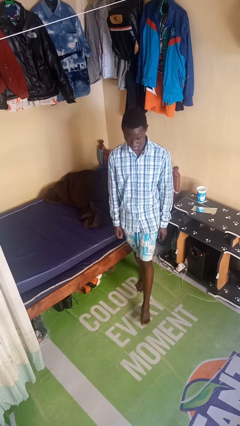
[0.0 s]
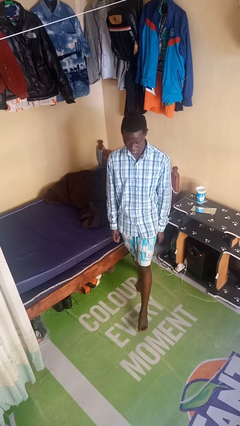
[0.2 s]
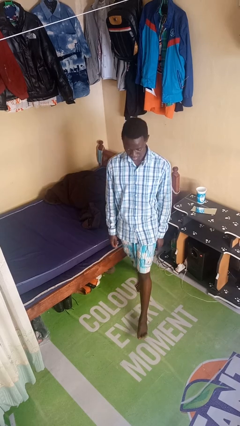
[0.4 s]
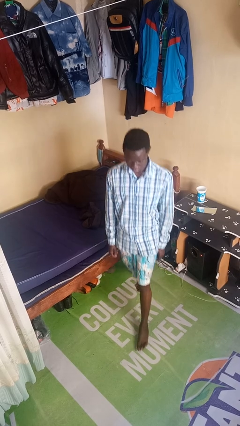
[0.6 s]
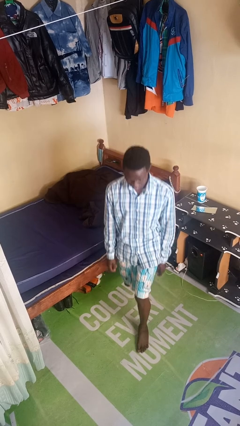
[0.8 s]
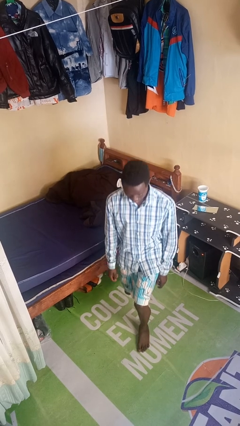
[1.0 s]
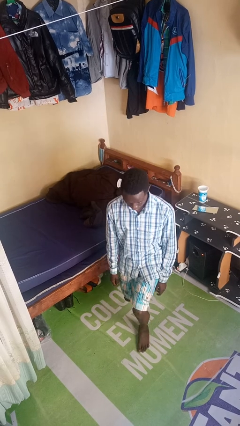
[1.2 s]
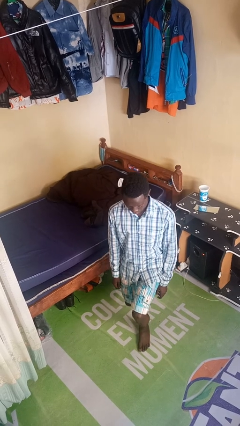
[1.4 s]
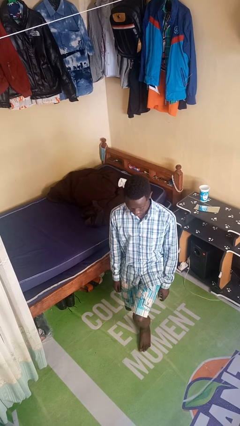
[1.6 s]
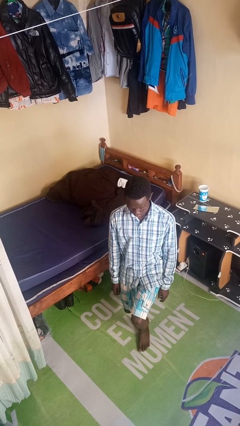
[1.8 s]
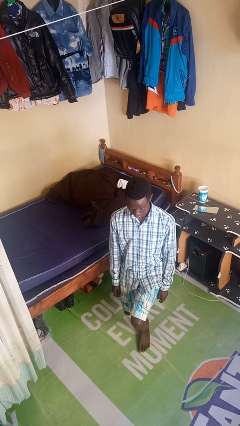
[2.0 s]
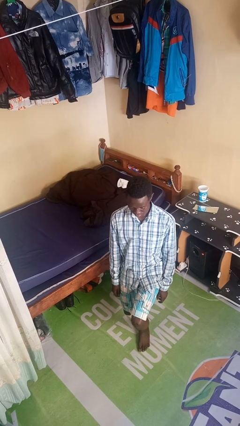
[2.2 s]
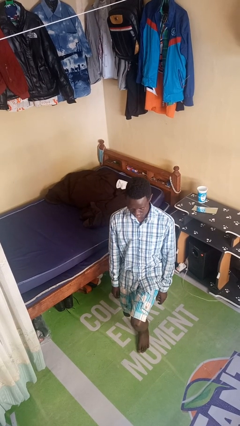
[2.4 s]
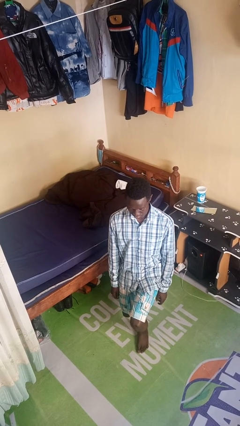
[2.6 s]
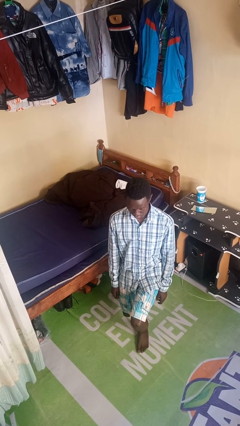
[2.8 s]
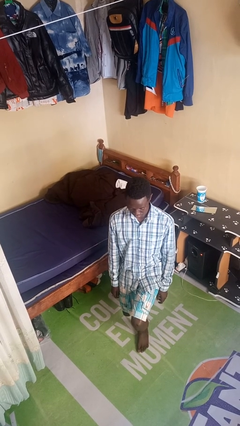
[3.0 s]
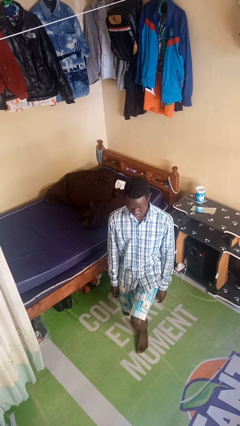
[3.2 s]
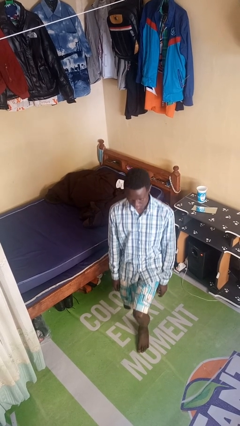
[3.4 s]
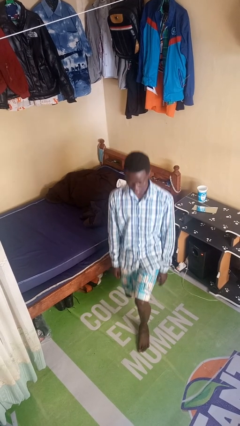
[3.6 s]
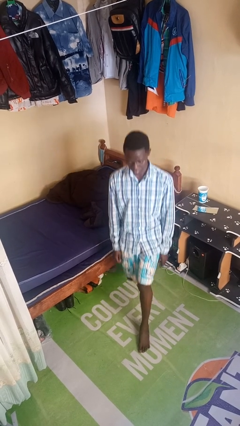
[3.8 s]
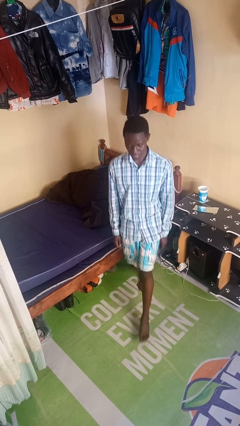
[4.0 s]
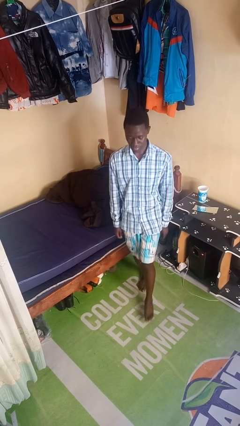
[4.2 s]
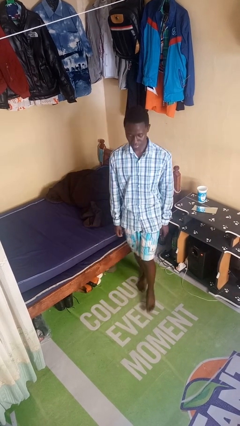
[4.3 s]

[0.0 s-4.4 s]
person exercises with lunges

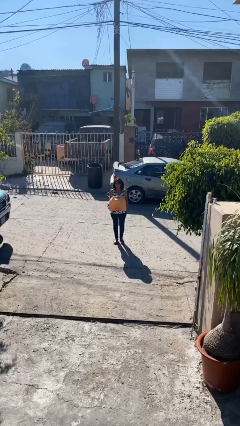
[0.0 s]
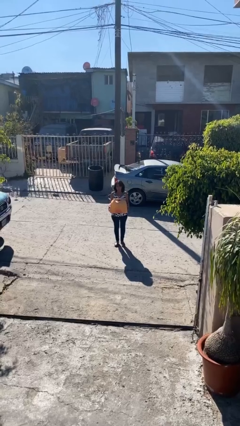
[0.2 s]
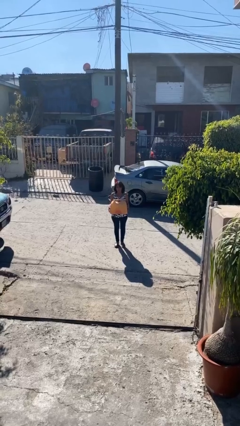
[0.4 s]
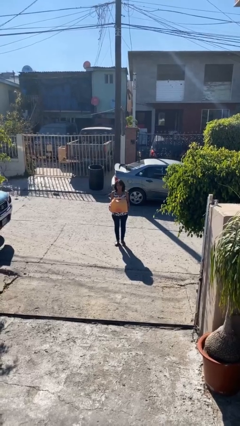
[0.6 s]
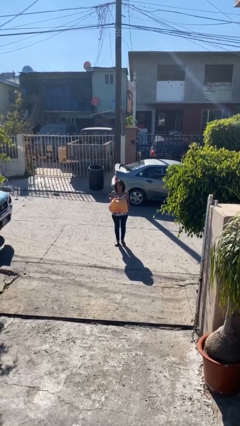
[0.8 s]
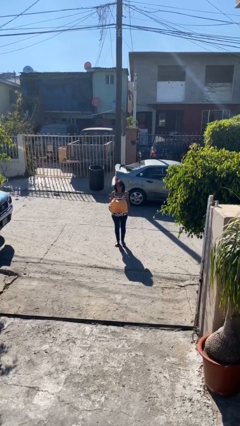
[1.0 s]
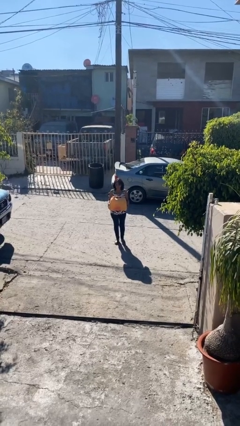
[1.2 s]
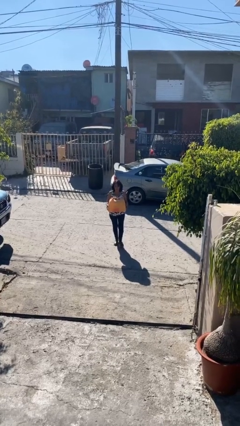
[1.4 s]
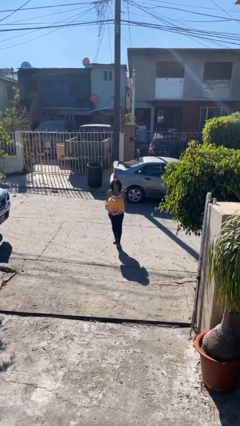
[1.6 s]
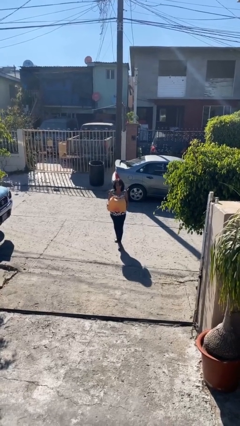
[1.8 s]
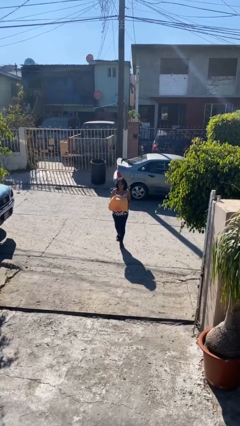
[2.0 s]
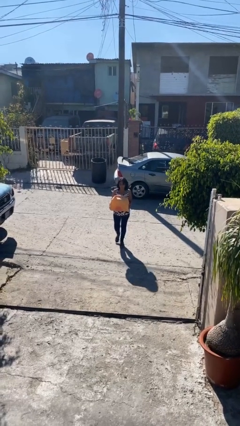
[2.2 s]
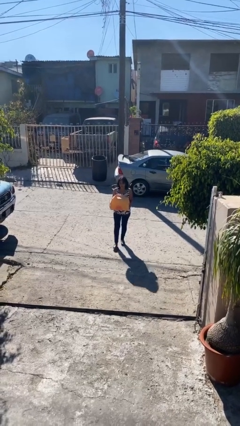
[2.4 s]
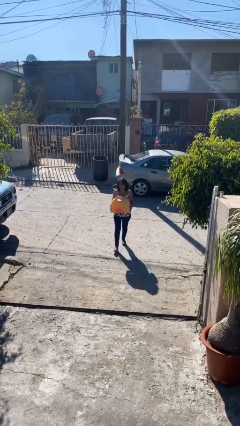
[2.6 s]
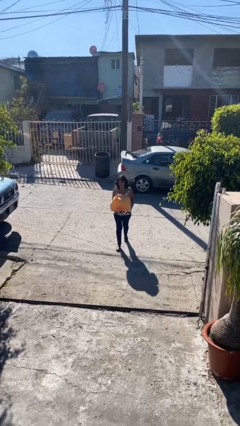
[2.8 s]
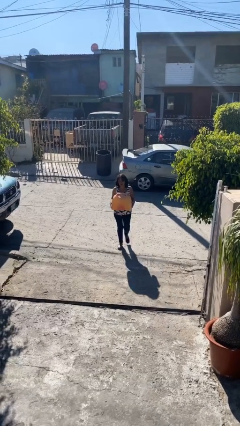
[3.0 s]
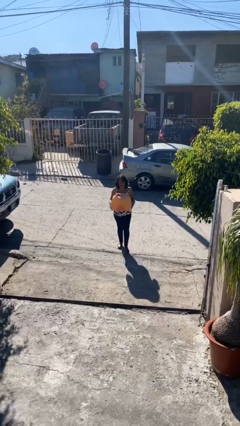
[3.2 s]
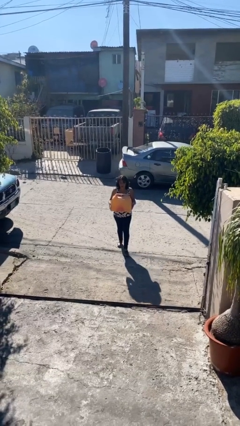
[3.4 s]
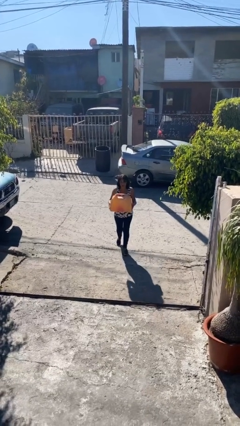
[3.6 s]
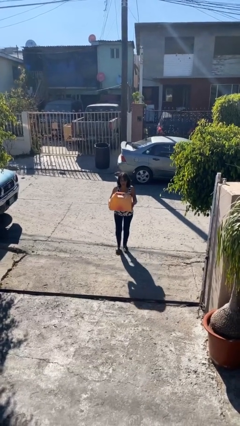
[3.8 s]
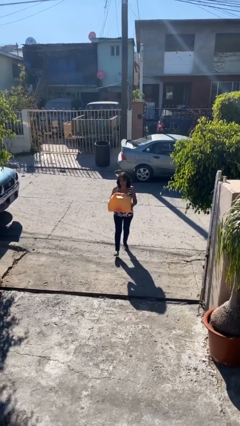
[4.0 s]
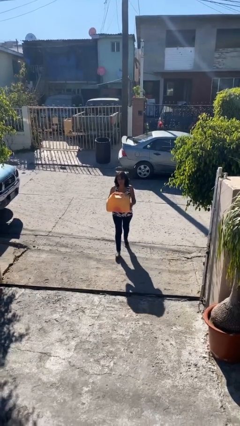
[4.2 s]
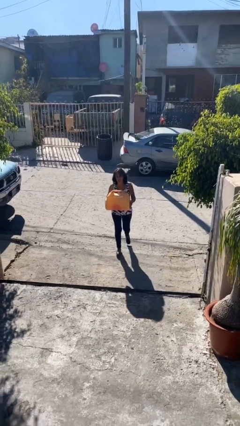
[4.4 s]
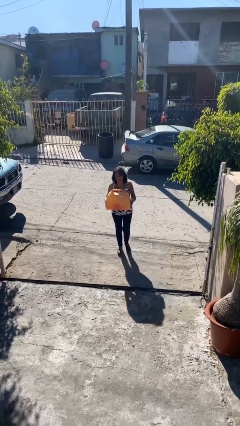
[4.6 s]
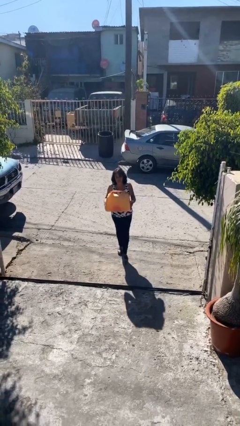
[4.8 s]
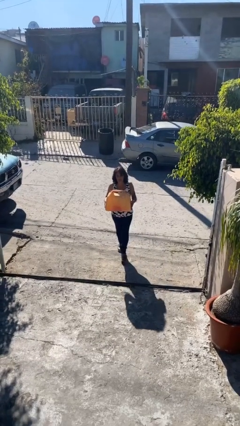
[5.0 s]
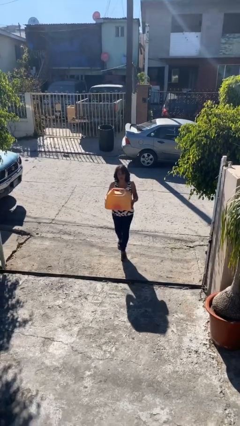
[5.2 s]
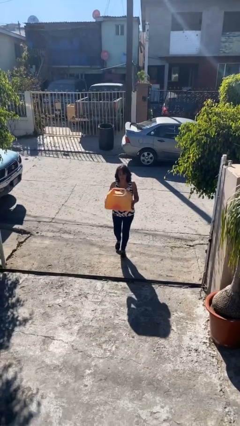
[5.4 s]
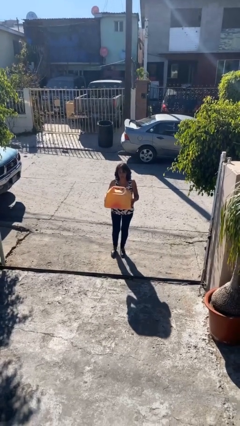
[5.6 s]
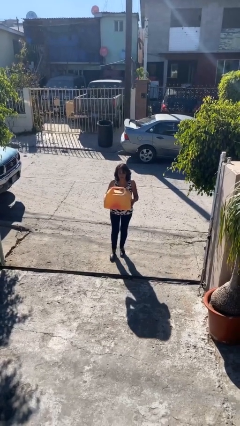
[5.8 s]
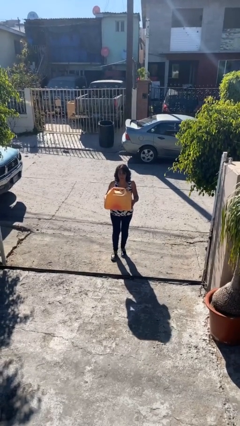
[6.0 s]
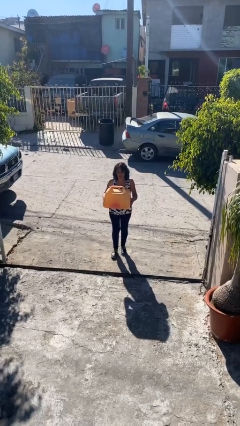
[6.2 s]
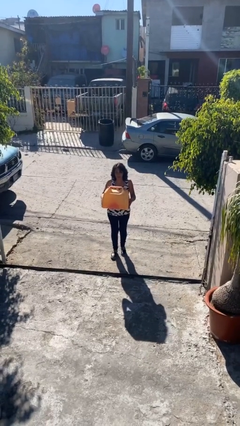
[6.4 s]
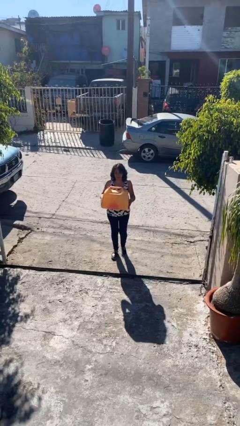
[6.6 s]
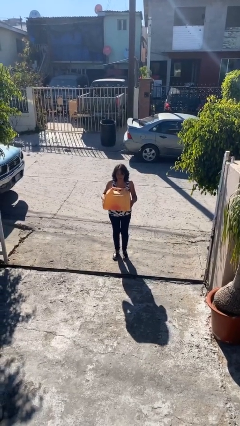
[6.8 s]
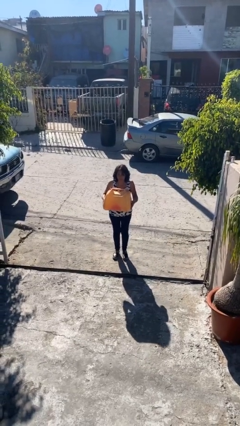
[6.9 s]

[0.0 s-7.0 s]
person carries heavy object

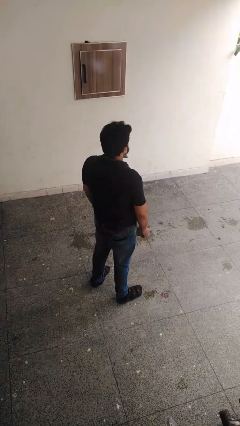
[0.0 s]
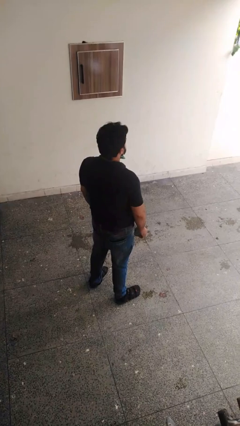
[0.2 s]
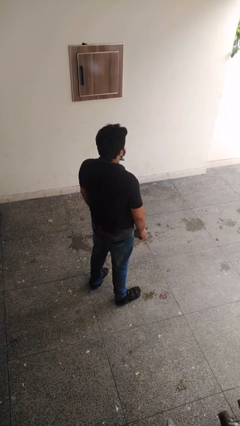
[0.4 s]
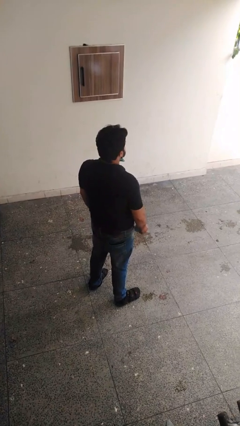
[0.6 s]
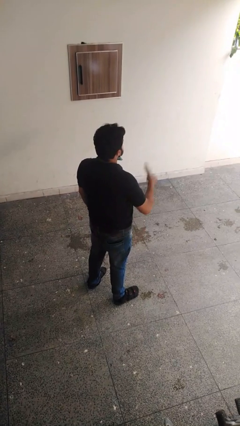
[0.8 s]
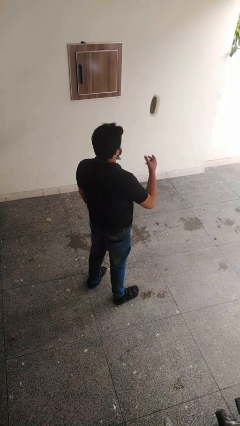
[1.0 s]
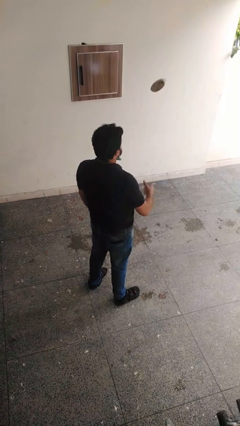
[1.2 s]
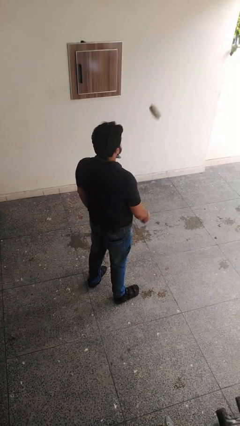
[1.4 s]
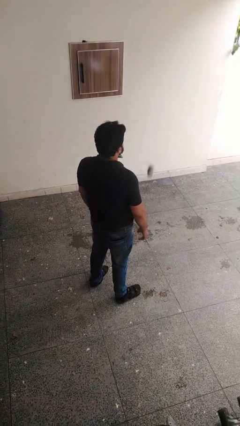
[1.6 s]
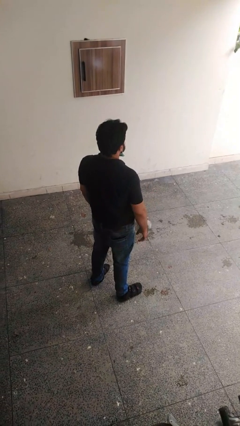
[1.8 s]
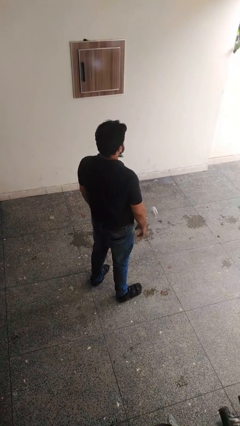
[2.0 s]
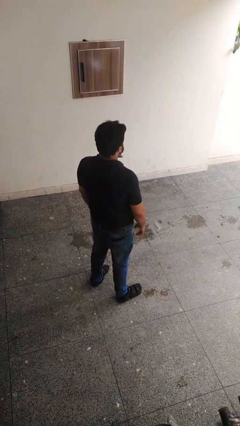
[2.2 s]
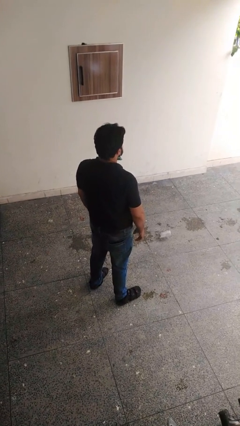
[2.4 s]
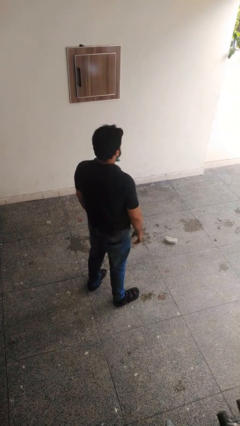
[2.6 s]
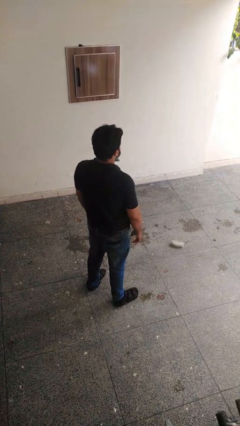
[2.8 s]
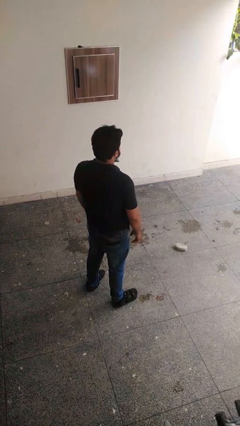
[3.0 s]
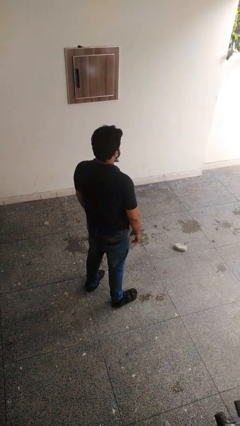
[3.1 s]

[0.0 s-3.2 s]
person throws object into air

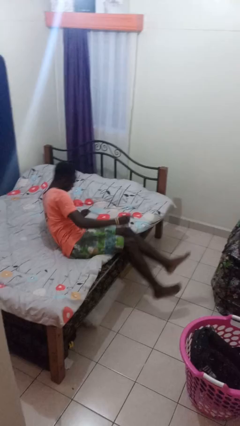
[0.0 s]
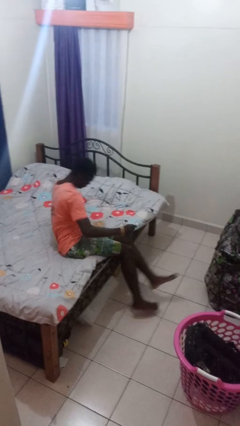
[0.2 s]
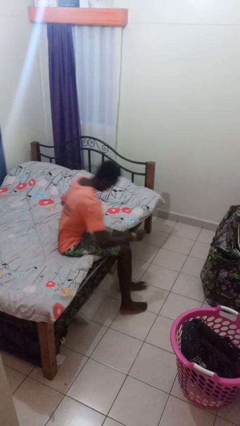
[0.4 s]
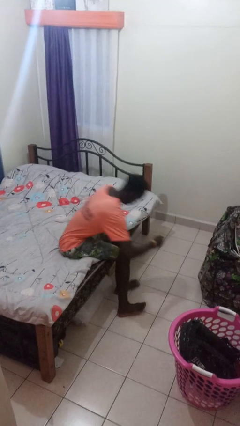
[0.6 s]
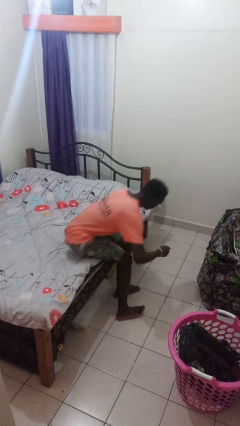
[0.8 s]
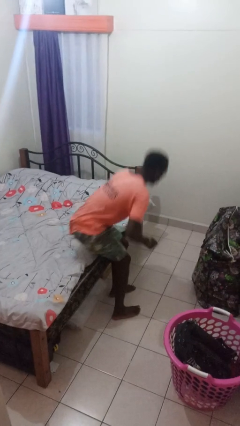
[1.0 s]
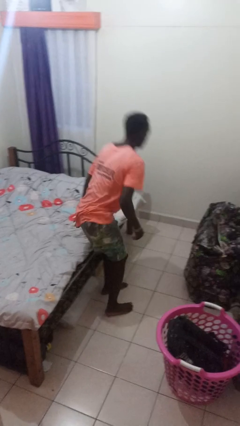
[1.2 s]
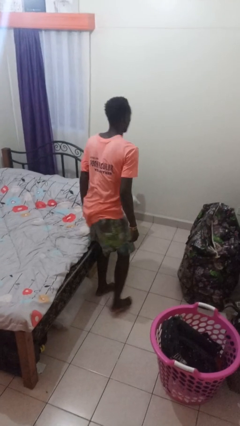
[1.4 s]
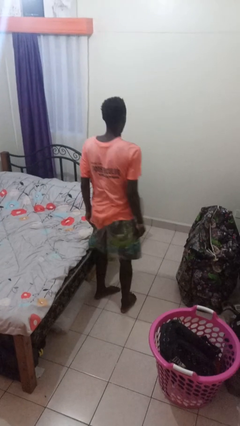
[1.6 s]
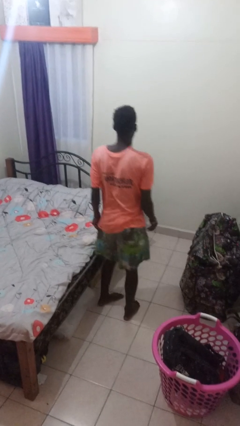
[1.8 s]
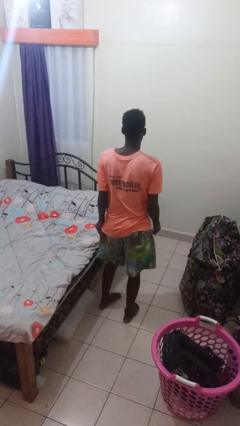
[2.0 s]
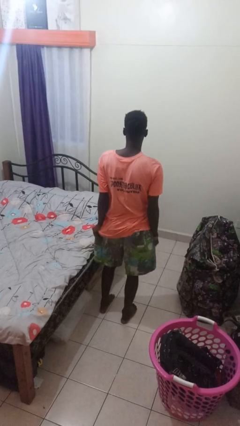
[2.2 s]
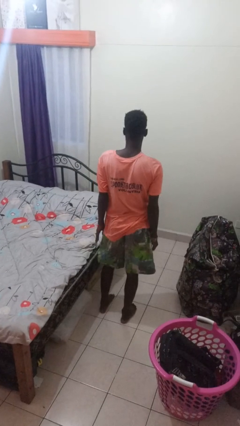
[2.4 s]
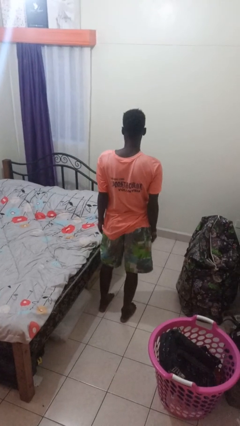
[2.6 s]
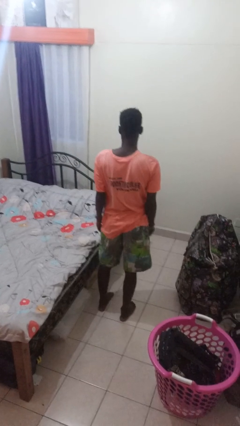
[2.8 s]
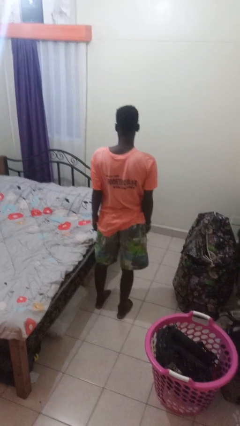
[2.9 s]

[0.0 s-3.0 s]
person stands up

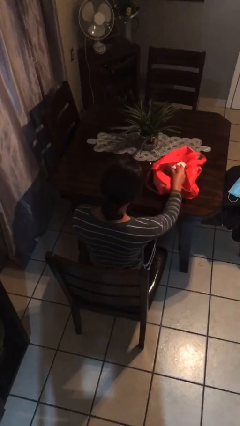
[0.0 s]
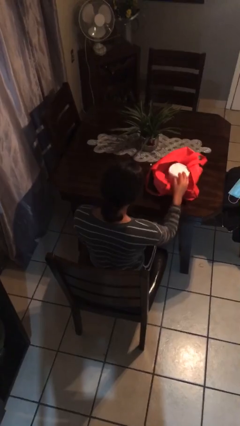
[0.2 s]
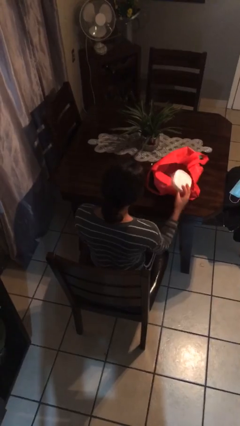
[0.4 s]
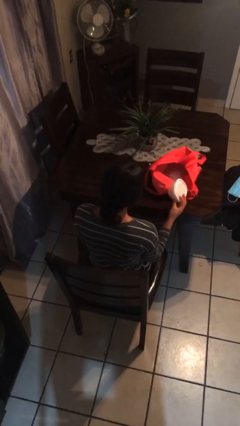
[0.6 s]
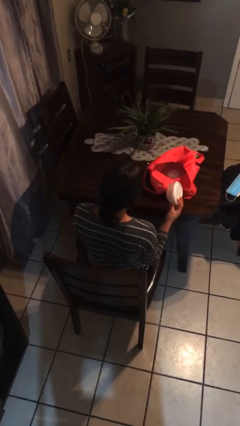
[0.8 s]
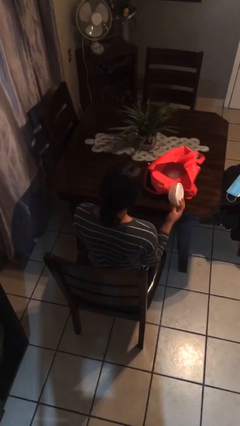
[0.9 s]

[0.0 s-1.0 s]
person takes object from bag
